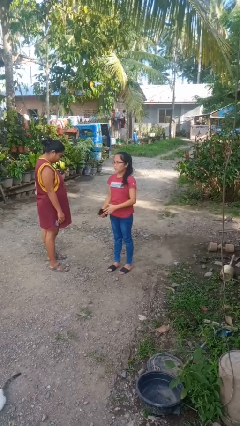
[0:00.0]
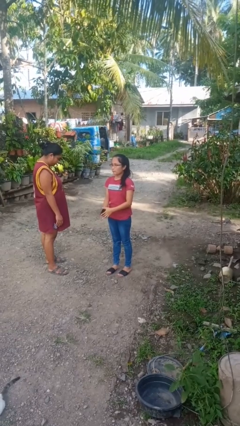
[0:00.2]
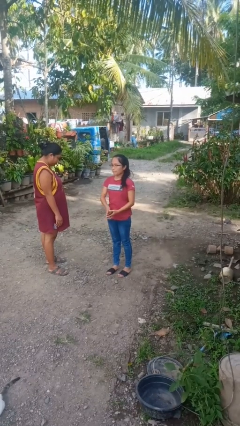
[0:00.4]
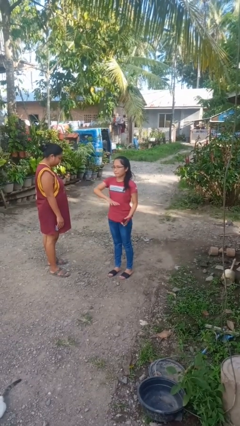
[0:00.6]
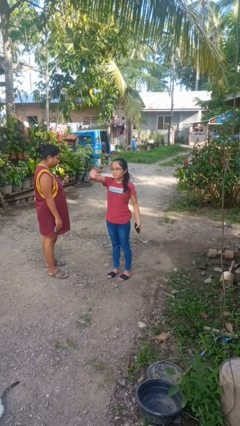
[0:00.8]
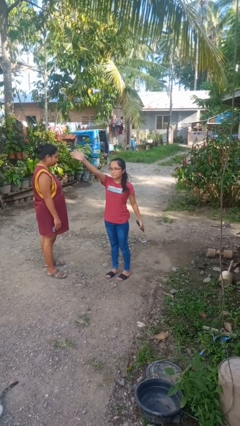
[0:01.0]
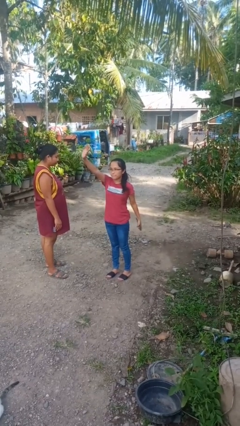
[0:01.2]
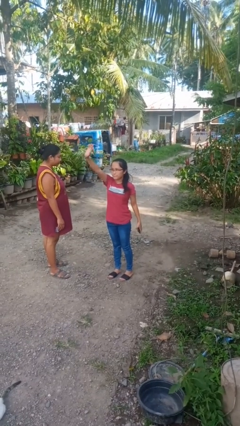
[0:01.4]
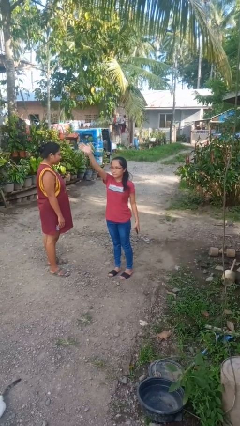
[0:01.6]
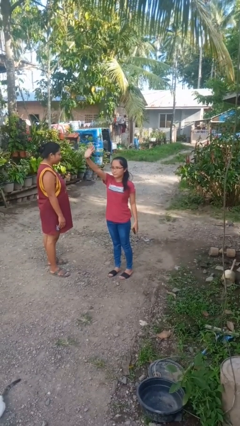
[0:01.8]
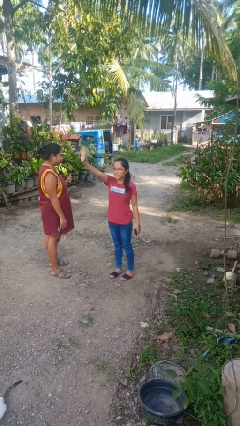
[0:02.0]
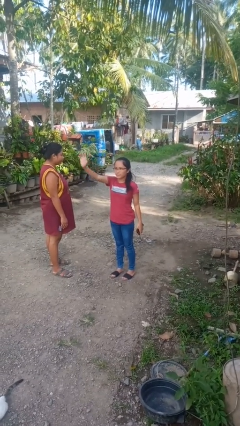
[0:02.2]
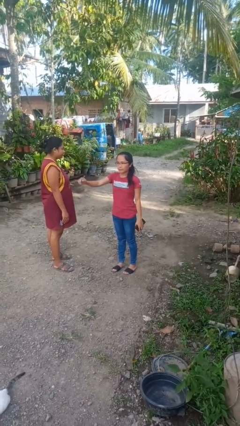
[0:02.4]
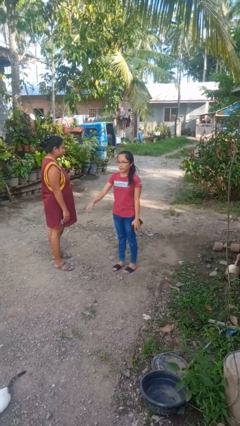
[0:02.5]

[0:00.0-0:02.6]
person waves at person

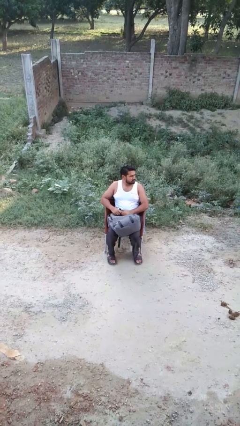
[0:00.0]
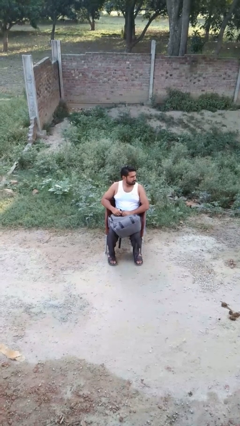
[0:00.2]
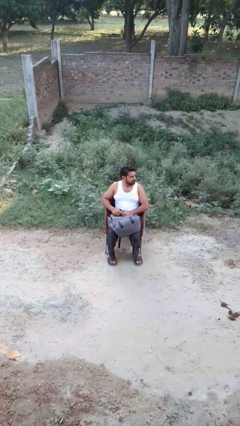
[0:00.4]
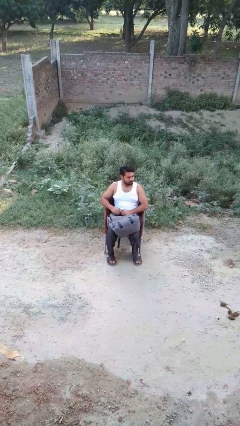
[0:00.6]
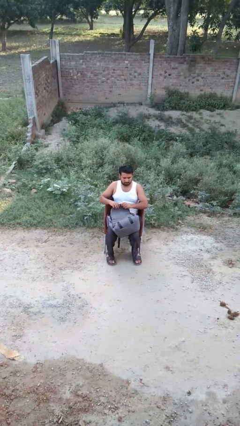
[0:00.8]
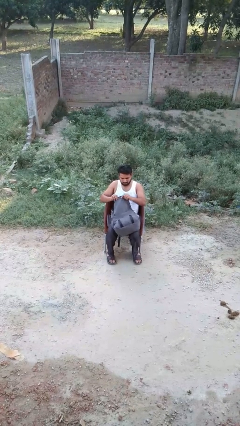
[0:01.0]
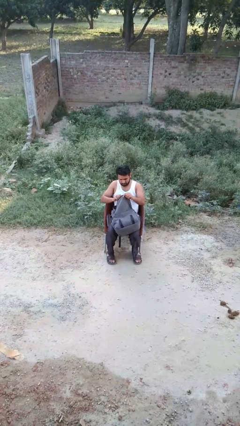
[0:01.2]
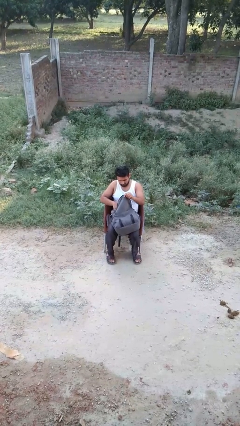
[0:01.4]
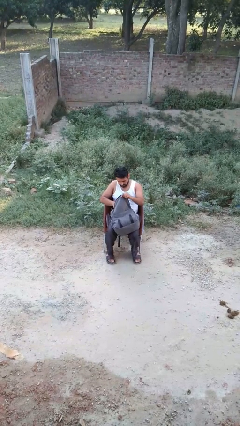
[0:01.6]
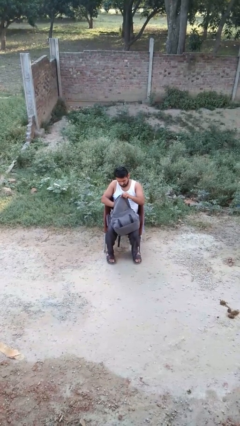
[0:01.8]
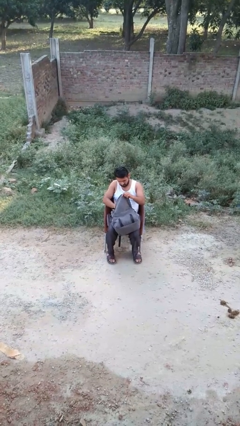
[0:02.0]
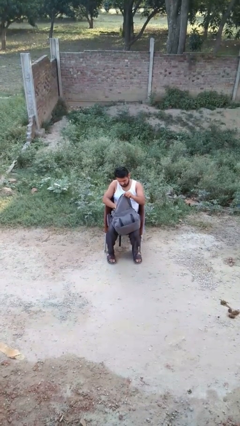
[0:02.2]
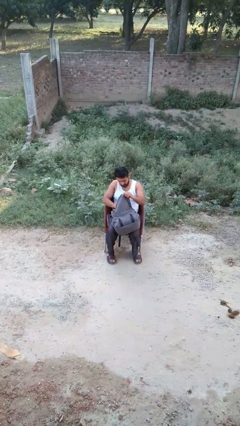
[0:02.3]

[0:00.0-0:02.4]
person searches in backpack

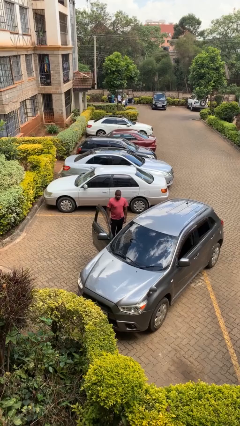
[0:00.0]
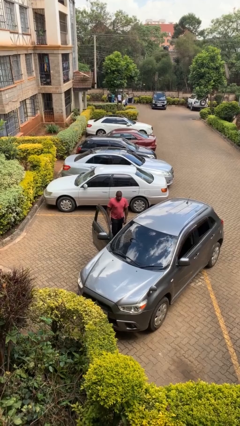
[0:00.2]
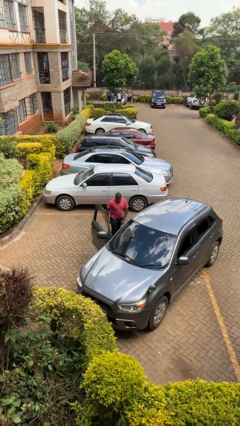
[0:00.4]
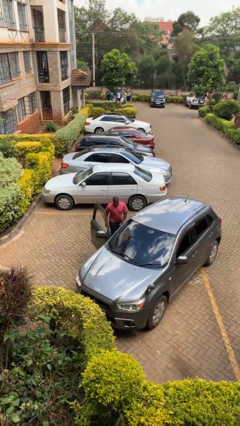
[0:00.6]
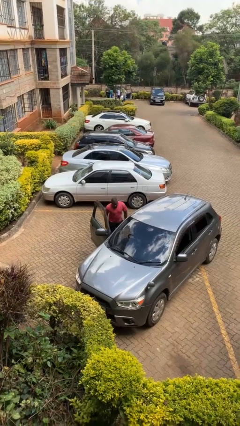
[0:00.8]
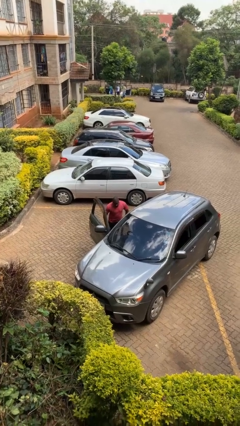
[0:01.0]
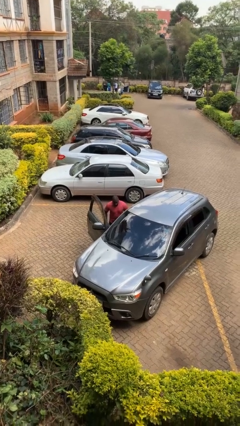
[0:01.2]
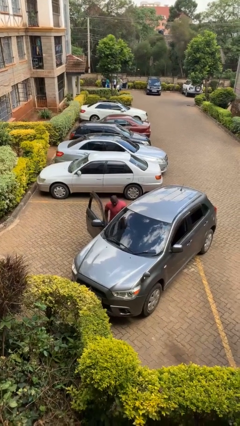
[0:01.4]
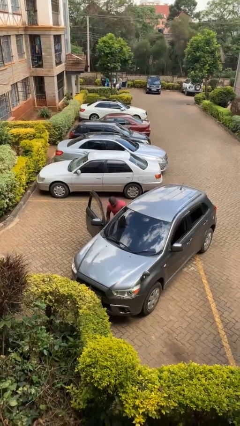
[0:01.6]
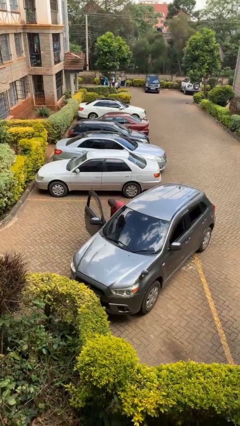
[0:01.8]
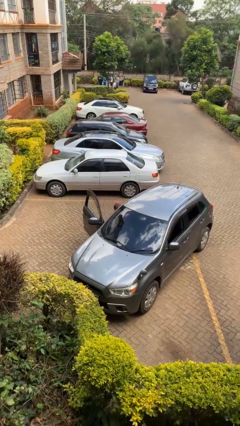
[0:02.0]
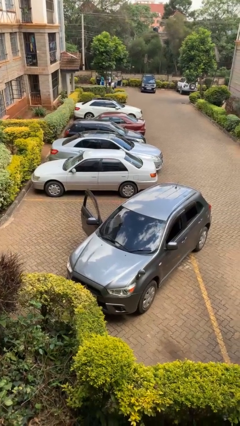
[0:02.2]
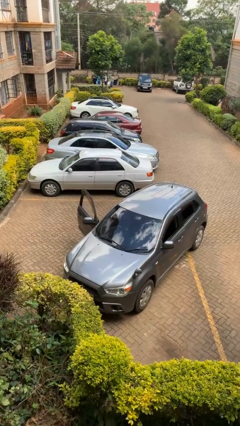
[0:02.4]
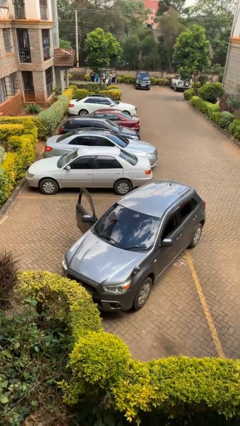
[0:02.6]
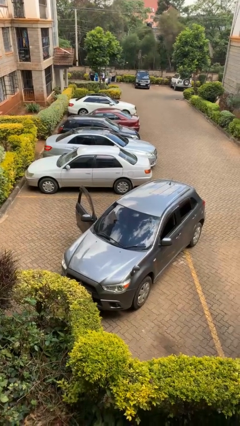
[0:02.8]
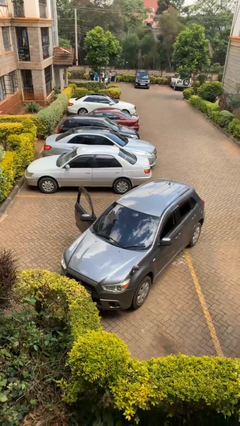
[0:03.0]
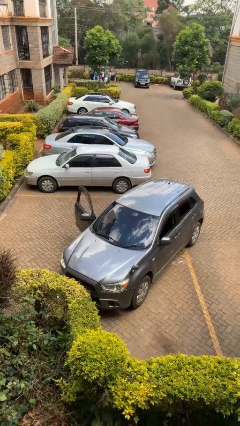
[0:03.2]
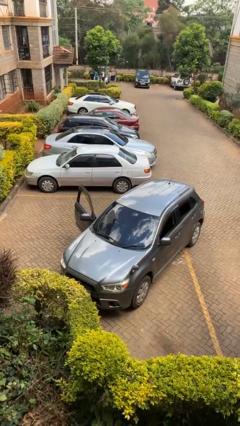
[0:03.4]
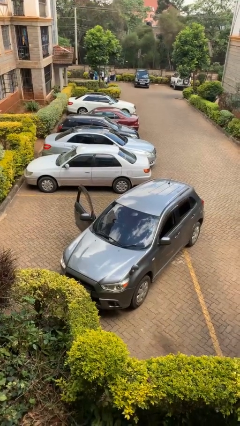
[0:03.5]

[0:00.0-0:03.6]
person enters car

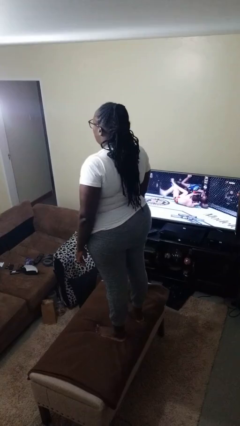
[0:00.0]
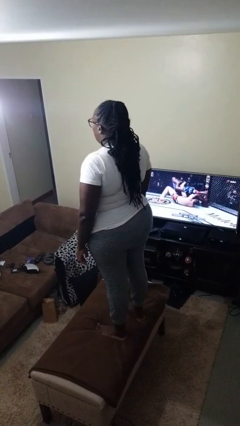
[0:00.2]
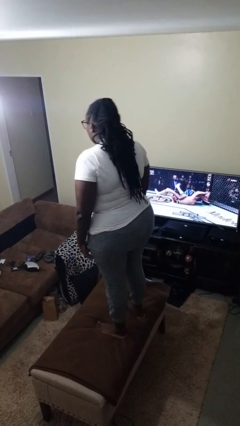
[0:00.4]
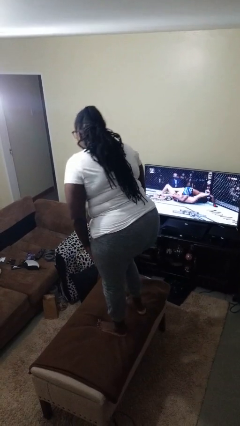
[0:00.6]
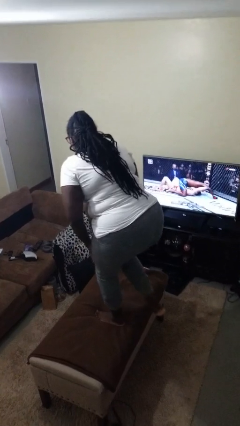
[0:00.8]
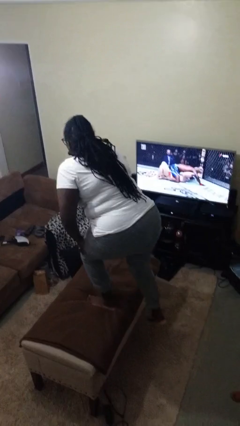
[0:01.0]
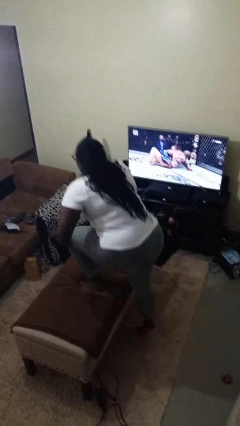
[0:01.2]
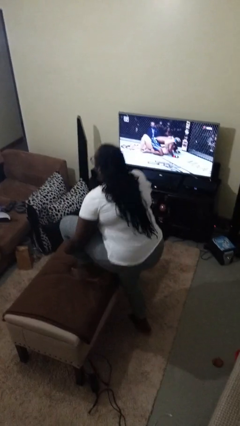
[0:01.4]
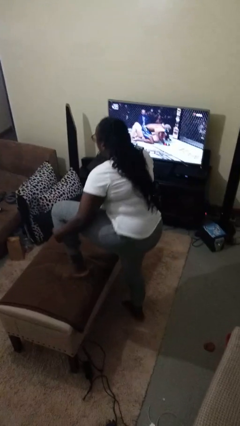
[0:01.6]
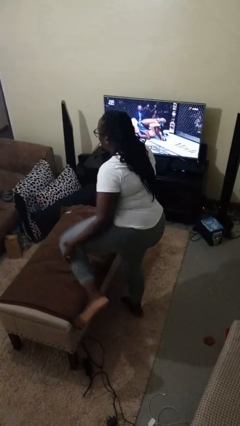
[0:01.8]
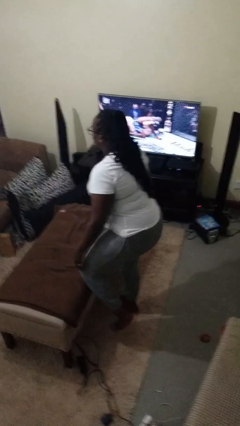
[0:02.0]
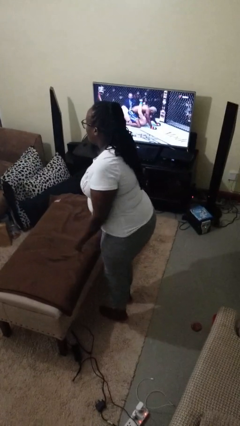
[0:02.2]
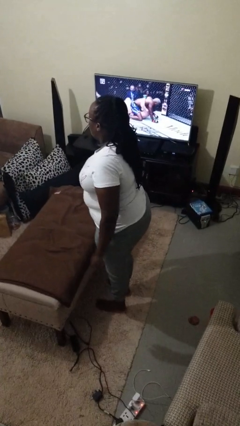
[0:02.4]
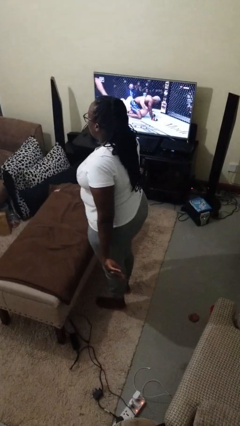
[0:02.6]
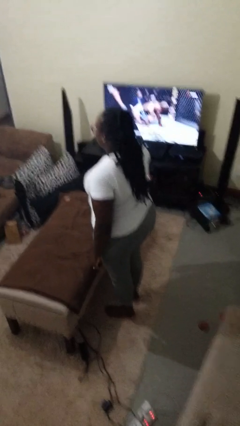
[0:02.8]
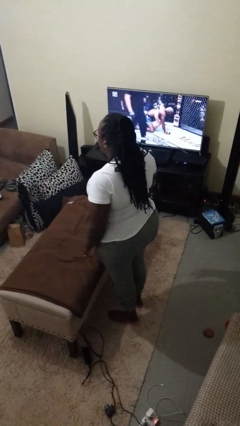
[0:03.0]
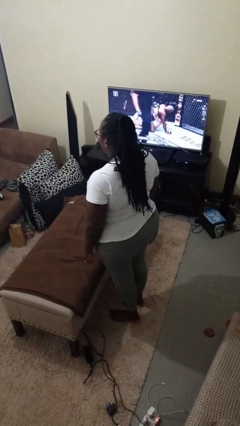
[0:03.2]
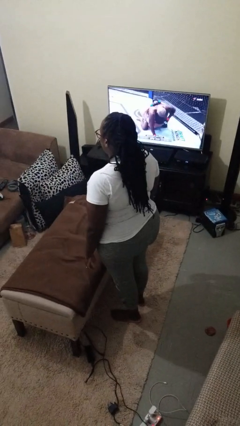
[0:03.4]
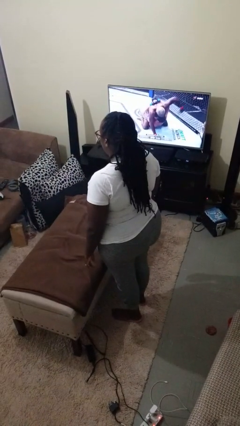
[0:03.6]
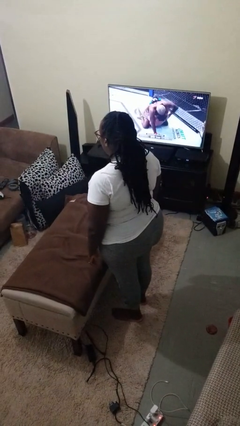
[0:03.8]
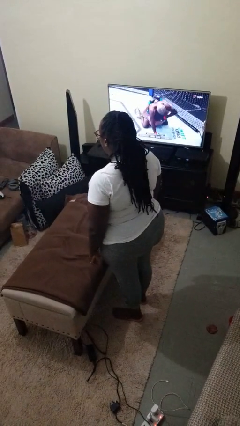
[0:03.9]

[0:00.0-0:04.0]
person climbs off table

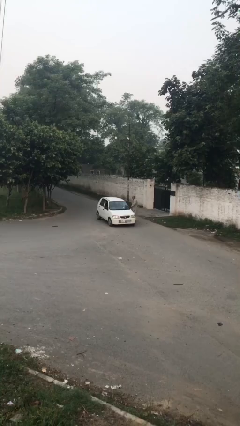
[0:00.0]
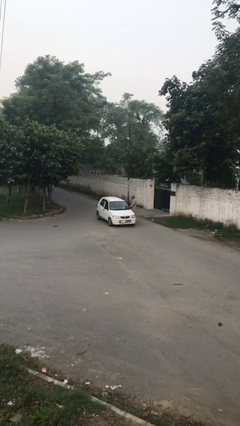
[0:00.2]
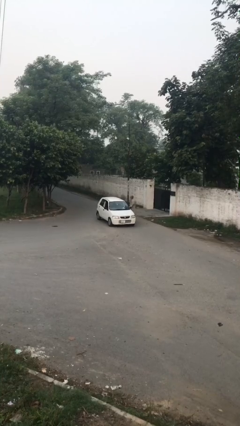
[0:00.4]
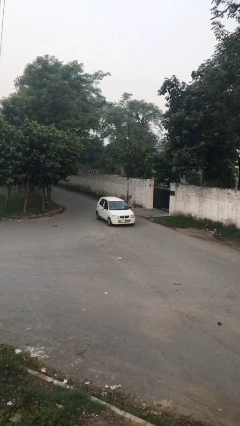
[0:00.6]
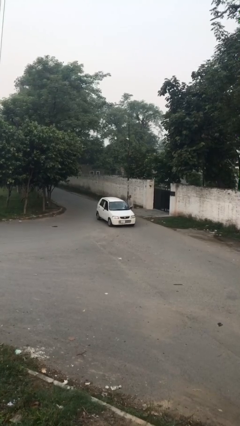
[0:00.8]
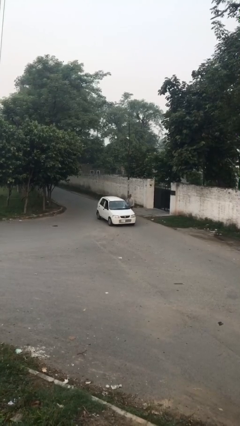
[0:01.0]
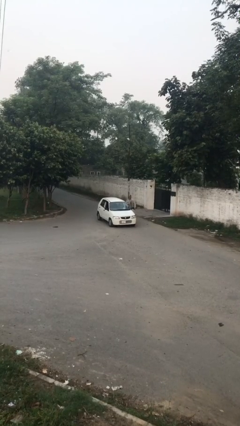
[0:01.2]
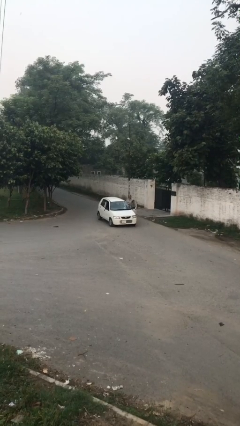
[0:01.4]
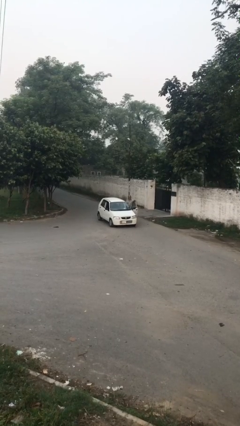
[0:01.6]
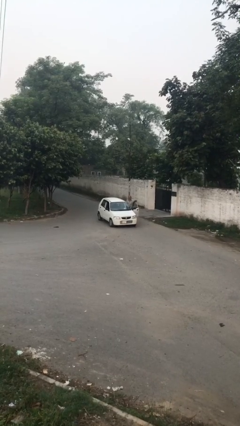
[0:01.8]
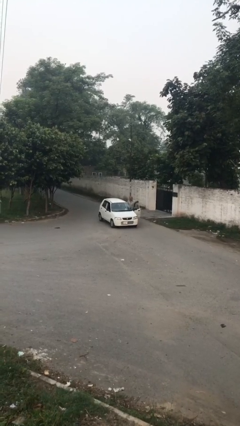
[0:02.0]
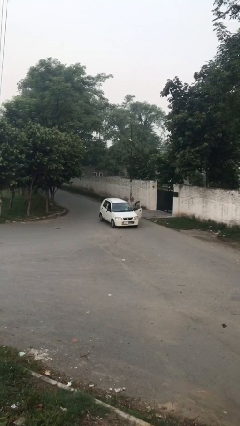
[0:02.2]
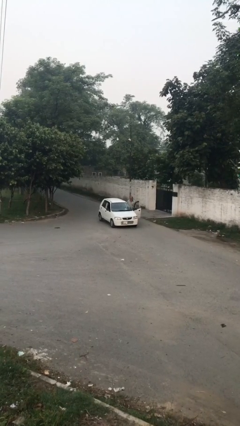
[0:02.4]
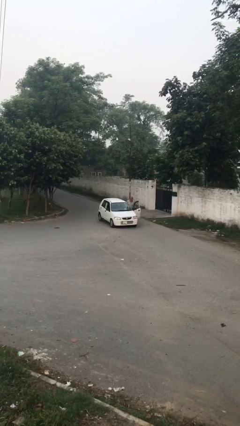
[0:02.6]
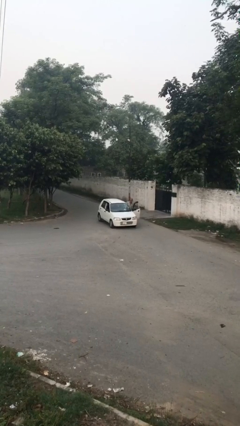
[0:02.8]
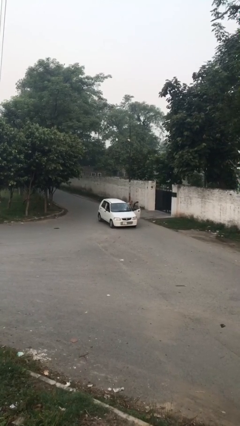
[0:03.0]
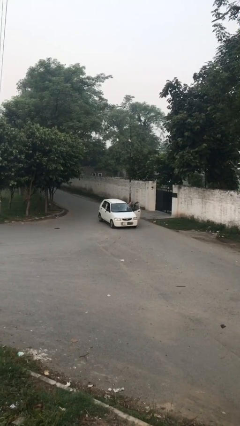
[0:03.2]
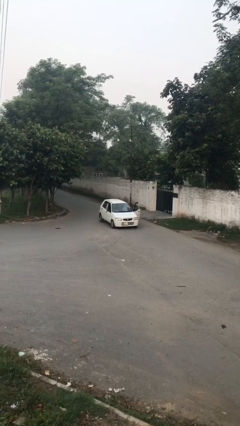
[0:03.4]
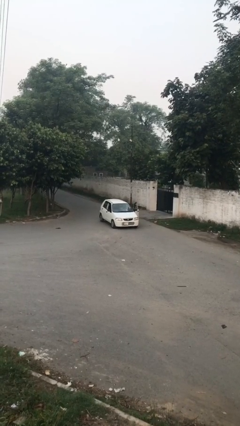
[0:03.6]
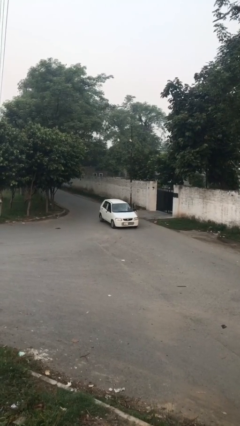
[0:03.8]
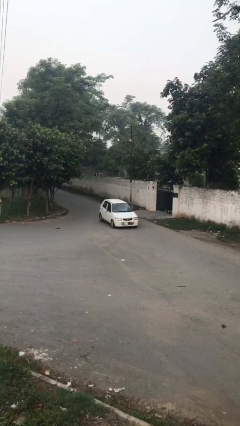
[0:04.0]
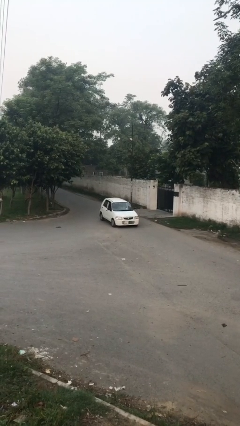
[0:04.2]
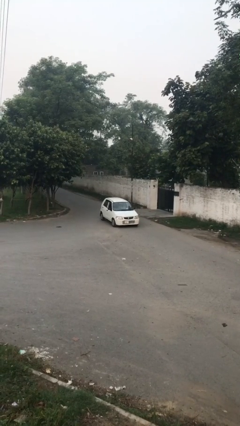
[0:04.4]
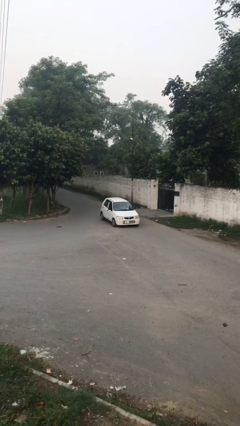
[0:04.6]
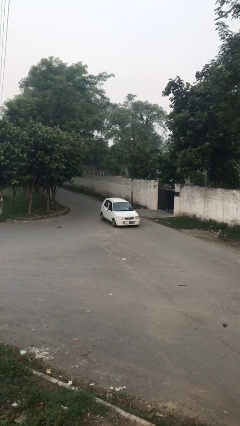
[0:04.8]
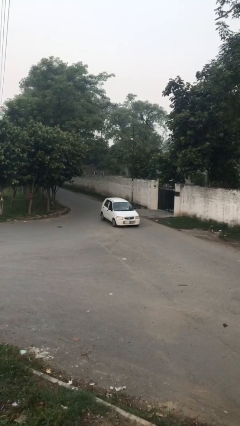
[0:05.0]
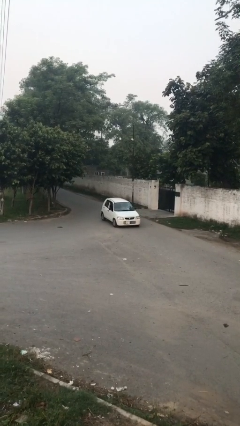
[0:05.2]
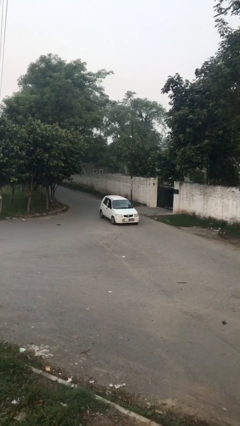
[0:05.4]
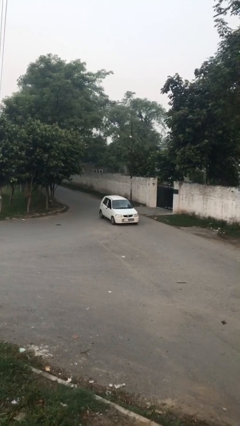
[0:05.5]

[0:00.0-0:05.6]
car picks up person
